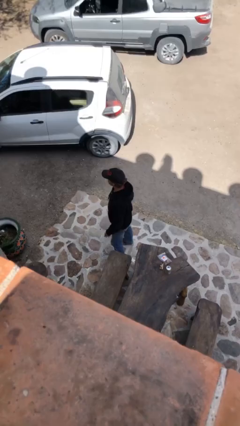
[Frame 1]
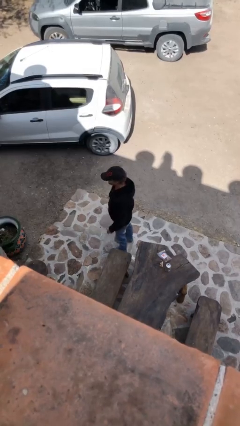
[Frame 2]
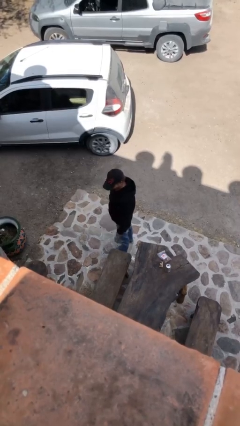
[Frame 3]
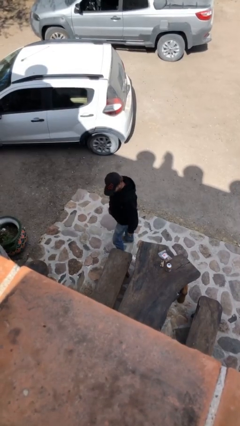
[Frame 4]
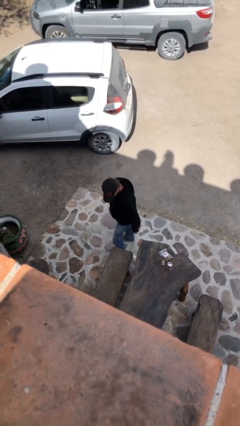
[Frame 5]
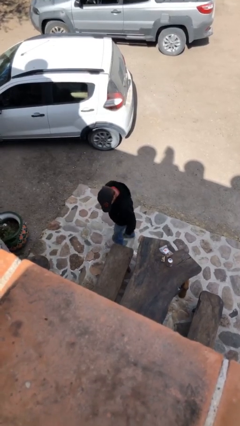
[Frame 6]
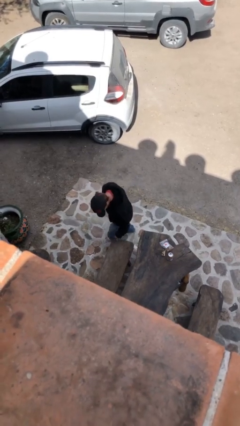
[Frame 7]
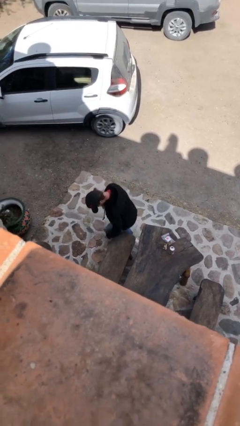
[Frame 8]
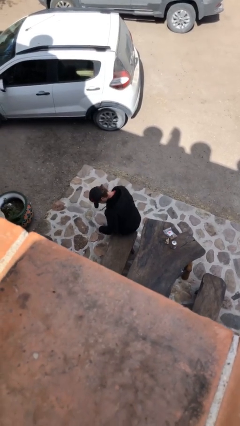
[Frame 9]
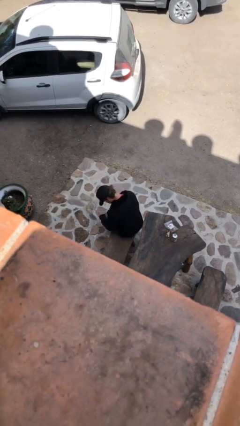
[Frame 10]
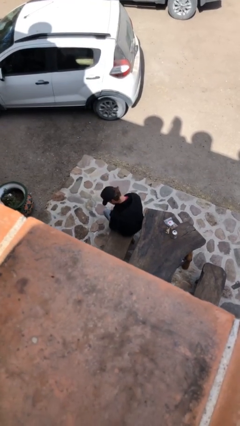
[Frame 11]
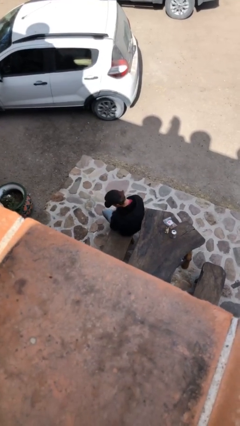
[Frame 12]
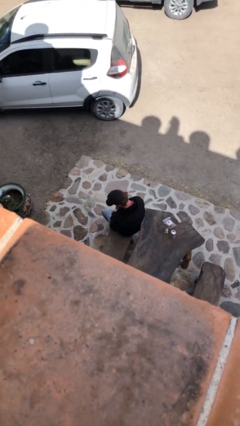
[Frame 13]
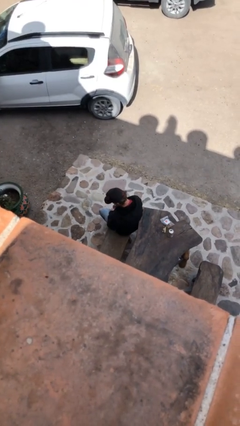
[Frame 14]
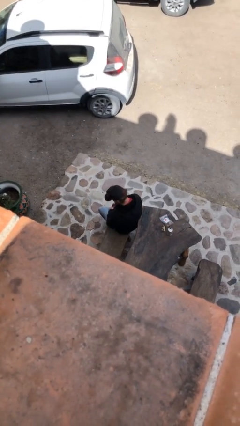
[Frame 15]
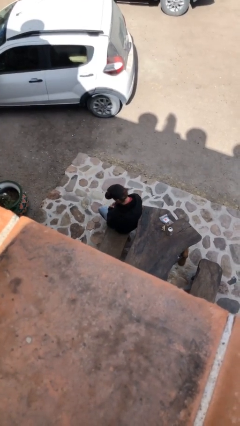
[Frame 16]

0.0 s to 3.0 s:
person sits down

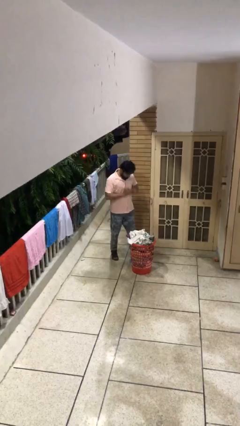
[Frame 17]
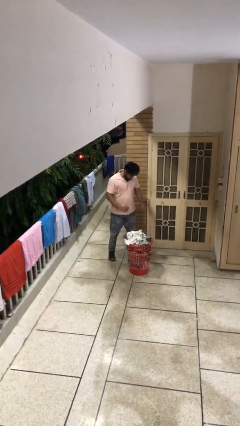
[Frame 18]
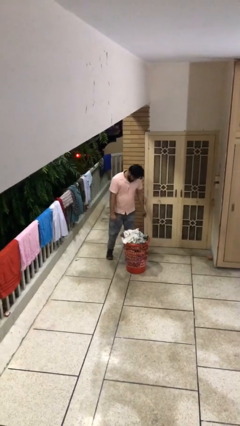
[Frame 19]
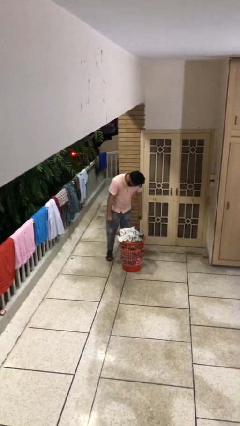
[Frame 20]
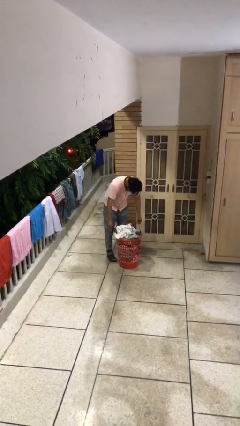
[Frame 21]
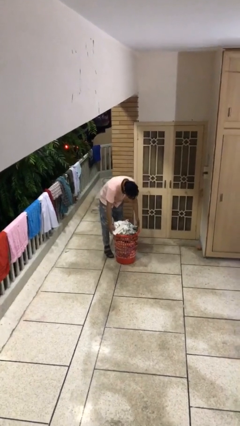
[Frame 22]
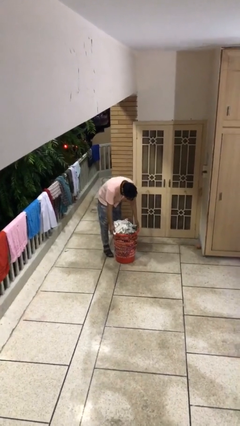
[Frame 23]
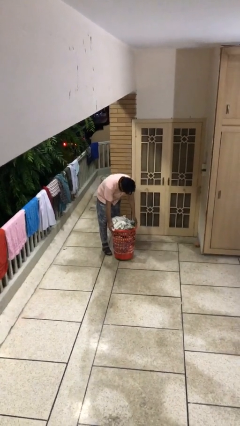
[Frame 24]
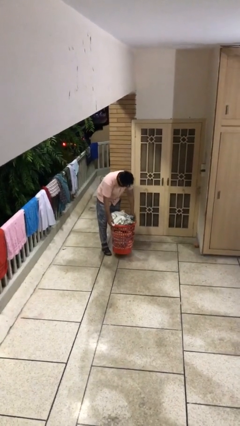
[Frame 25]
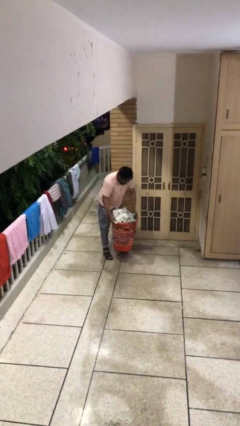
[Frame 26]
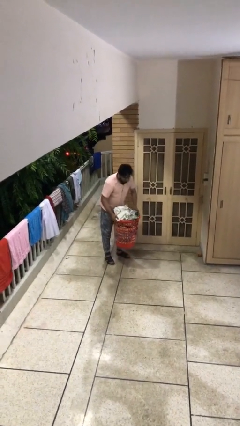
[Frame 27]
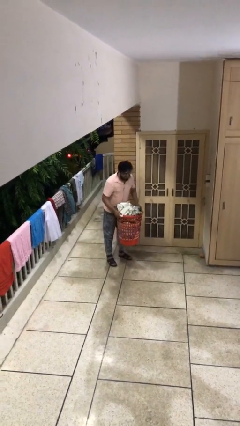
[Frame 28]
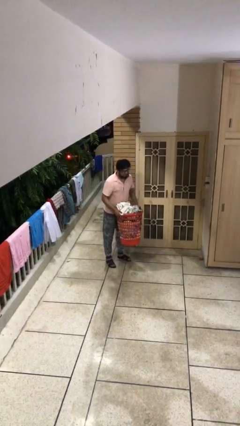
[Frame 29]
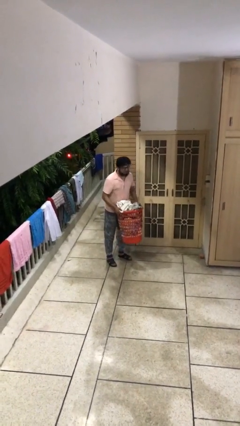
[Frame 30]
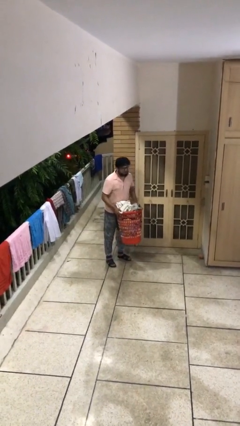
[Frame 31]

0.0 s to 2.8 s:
person picks up object from floor

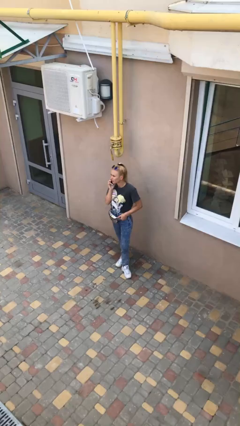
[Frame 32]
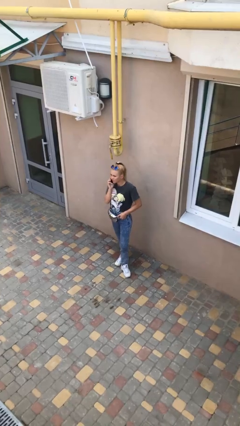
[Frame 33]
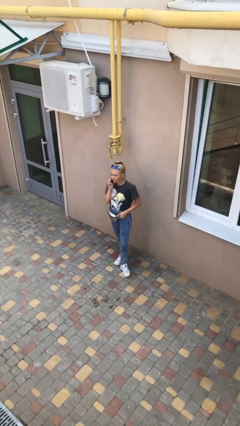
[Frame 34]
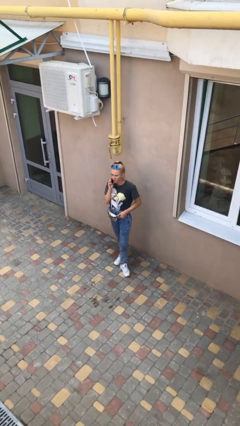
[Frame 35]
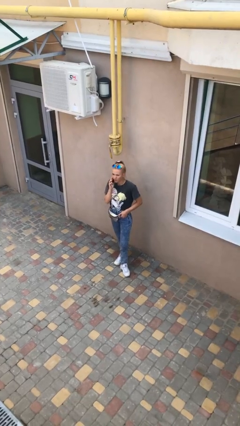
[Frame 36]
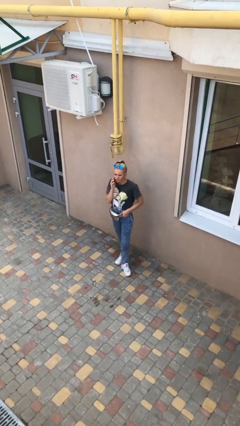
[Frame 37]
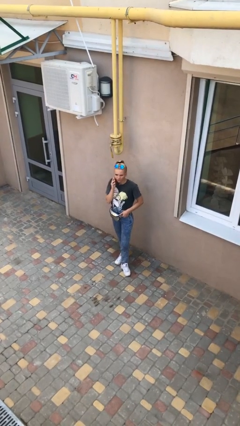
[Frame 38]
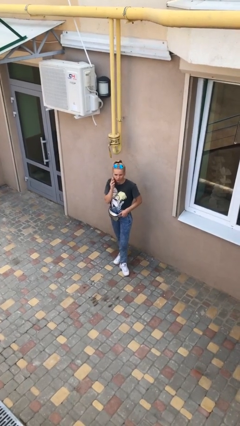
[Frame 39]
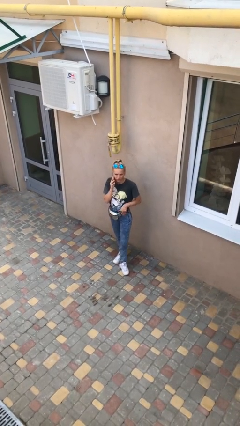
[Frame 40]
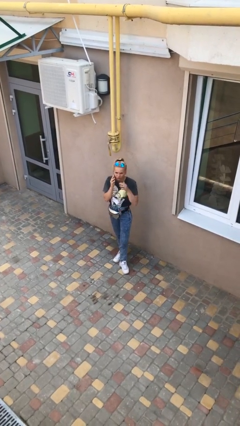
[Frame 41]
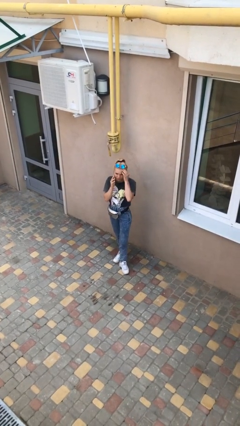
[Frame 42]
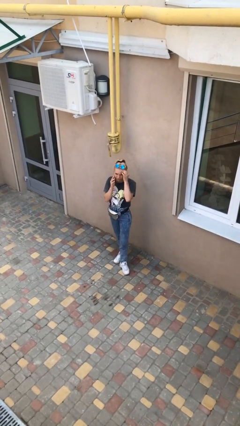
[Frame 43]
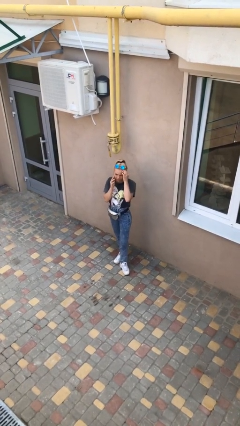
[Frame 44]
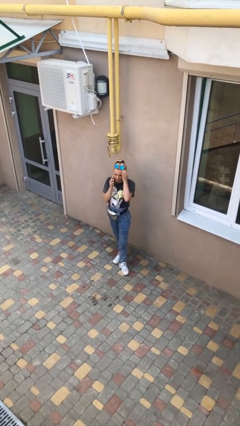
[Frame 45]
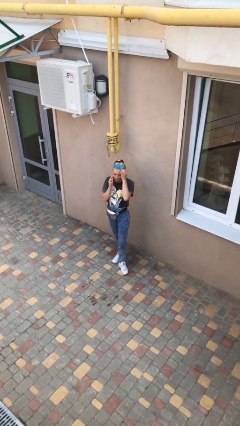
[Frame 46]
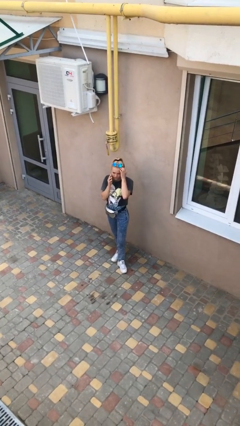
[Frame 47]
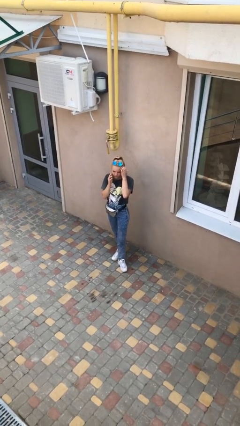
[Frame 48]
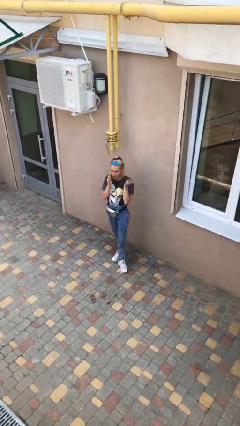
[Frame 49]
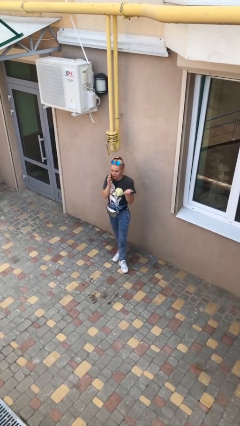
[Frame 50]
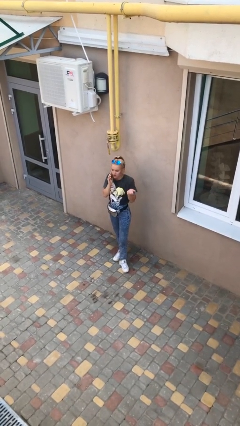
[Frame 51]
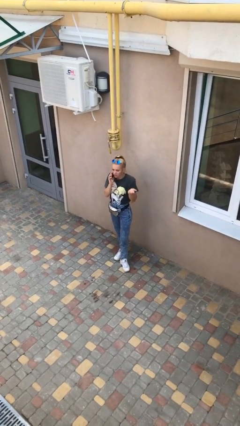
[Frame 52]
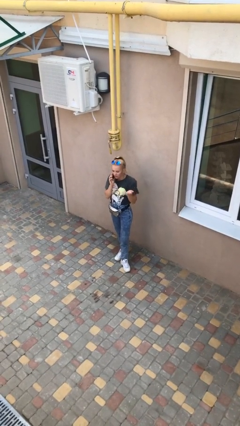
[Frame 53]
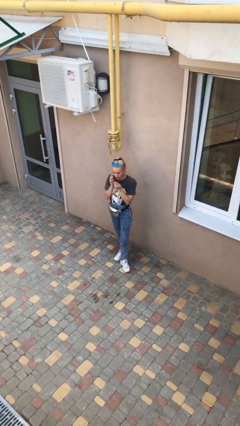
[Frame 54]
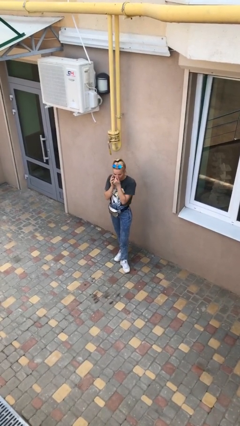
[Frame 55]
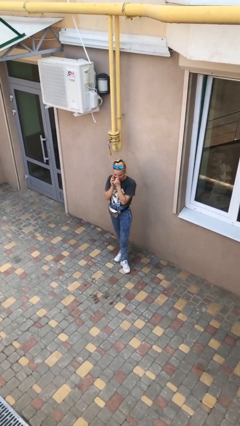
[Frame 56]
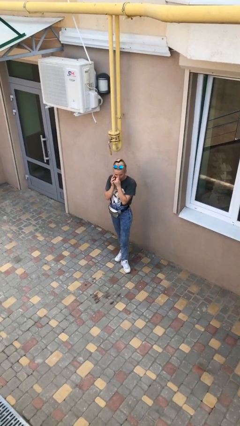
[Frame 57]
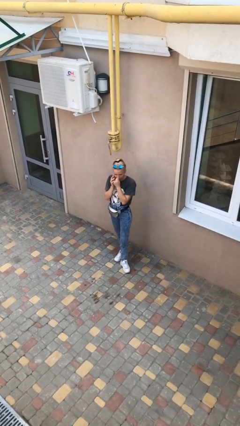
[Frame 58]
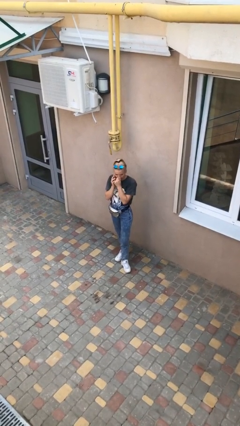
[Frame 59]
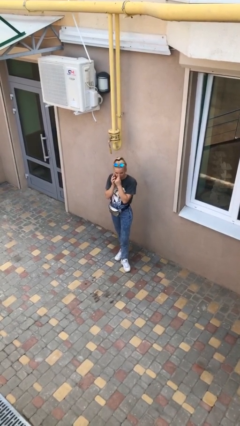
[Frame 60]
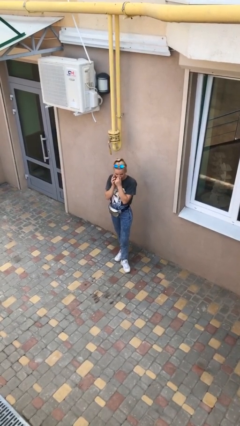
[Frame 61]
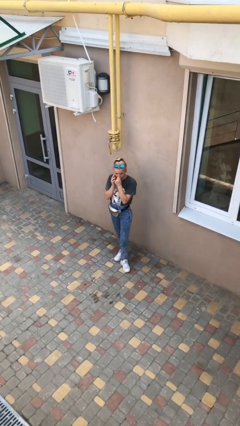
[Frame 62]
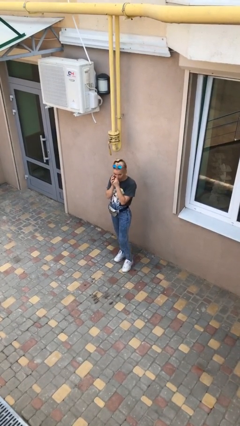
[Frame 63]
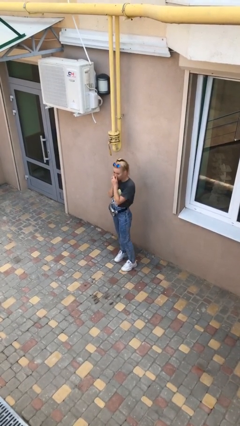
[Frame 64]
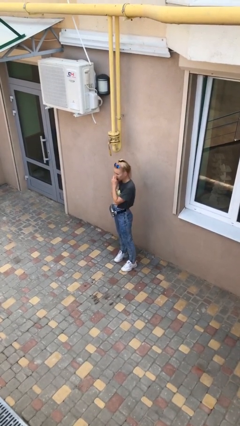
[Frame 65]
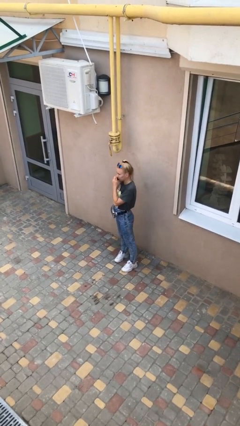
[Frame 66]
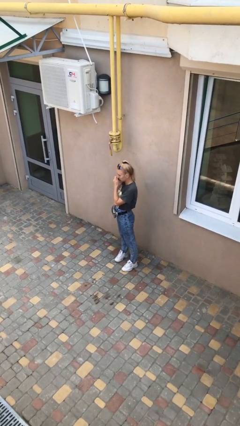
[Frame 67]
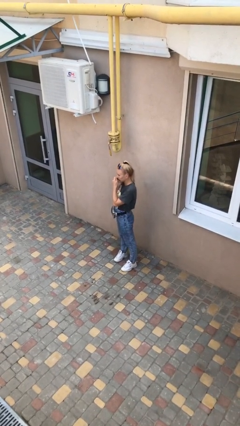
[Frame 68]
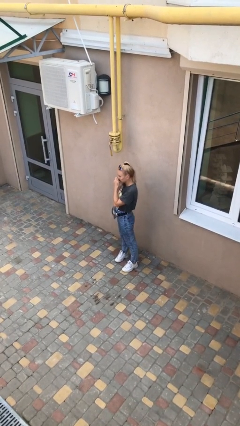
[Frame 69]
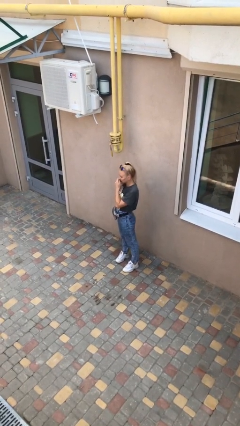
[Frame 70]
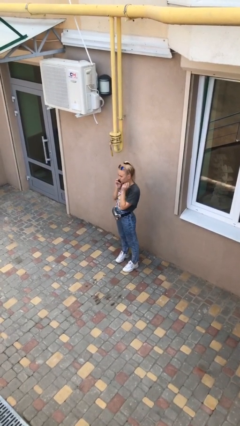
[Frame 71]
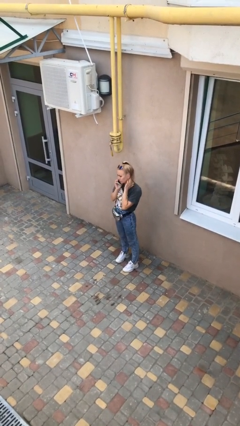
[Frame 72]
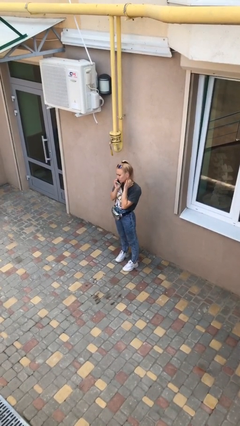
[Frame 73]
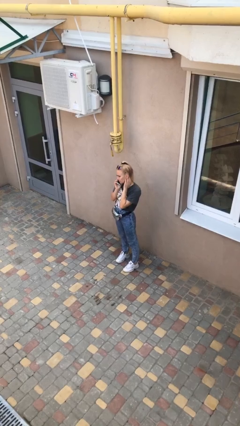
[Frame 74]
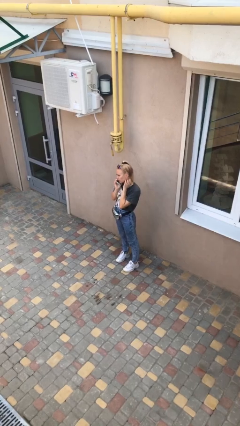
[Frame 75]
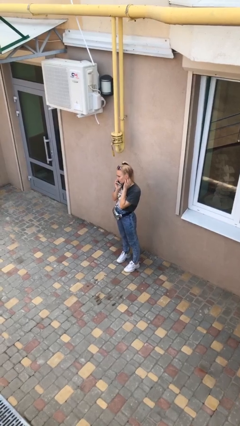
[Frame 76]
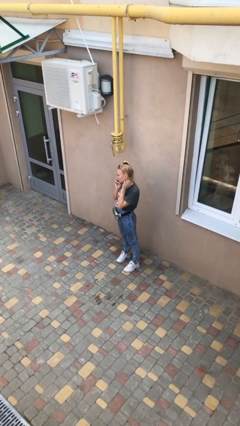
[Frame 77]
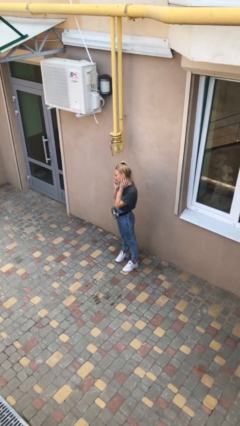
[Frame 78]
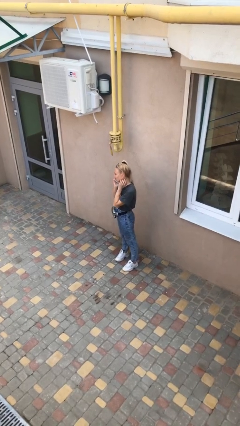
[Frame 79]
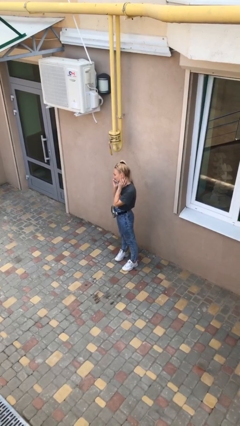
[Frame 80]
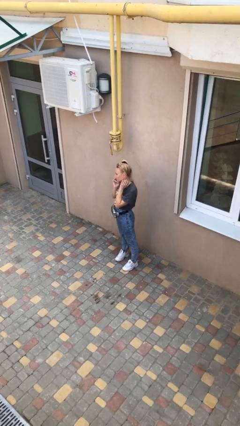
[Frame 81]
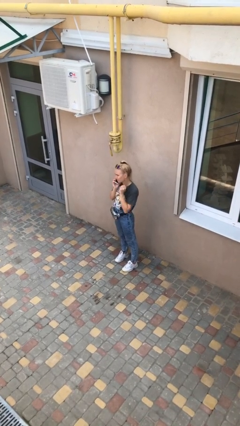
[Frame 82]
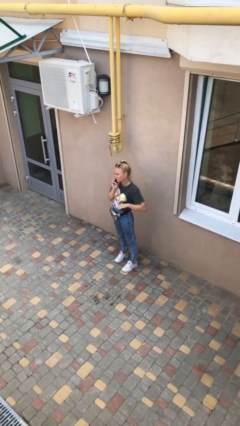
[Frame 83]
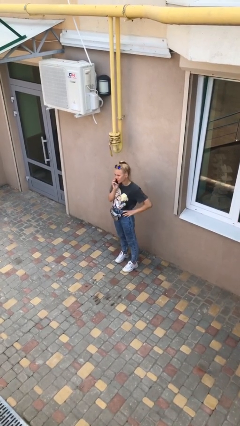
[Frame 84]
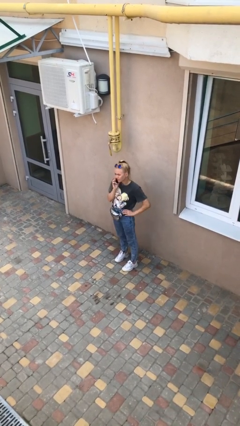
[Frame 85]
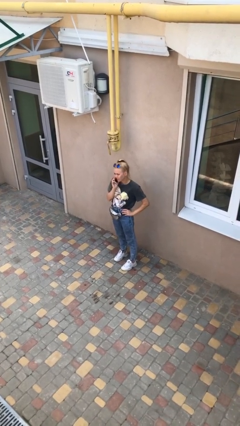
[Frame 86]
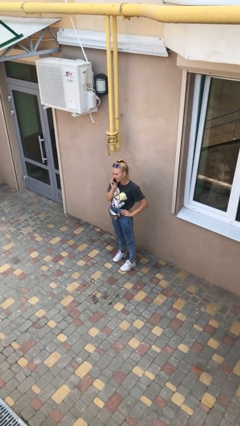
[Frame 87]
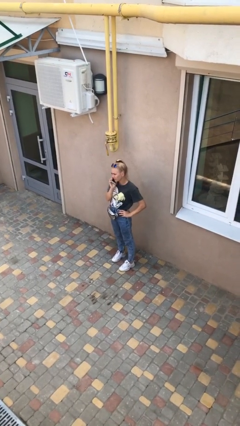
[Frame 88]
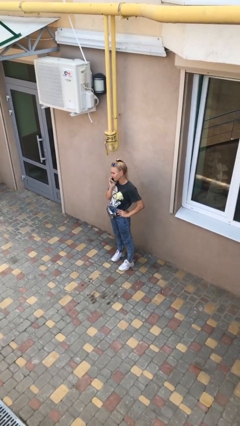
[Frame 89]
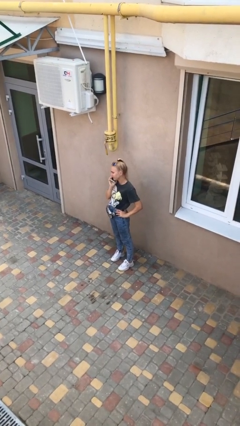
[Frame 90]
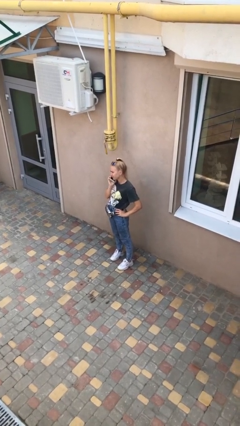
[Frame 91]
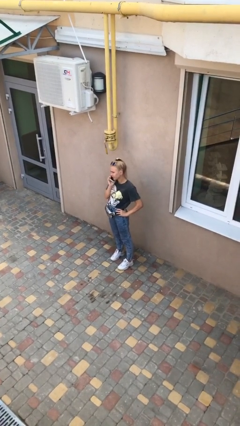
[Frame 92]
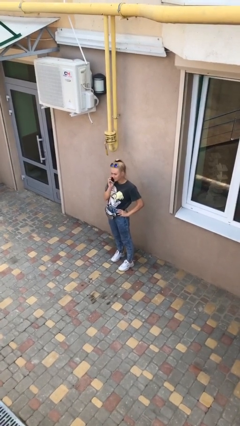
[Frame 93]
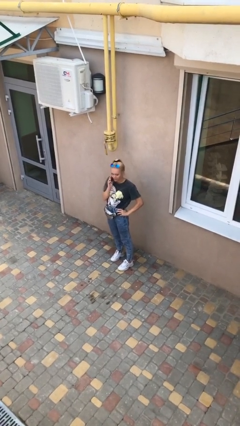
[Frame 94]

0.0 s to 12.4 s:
person talks on phone
